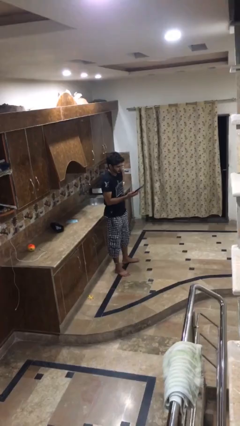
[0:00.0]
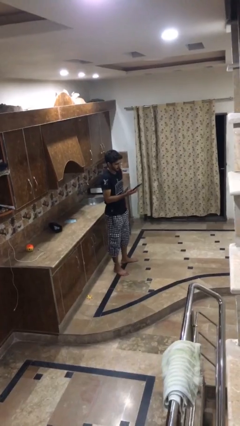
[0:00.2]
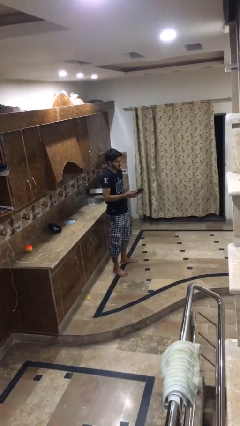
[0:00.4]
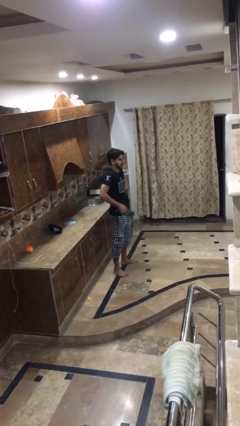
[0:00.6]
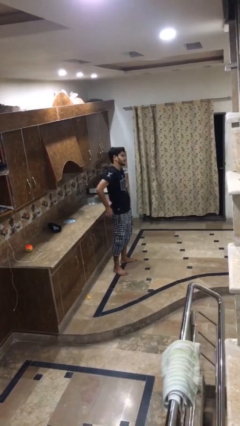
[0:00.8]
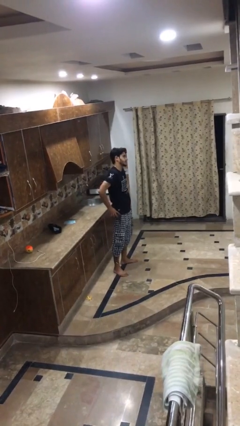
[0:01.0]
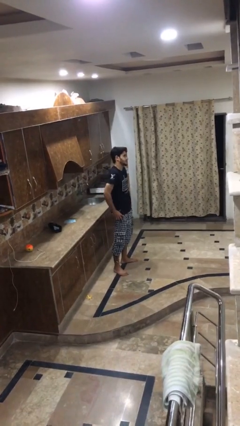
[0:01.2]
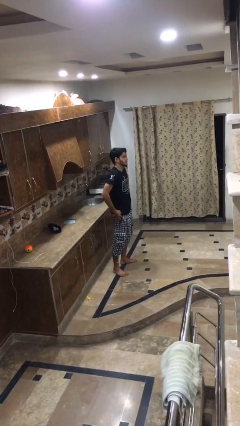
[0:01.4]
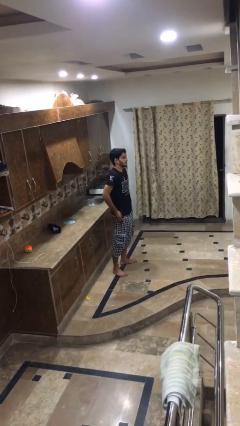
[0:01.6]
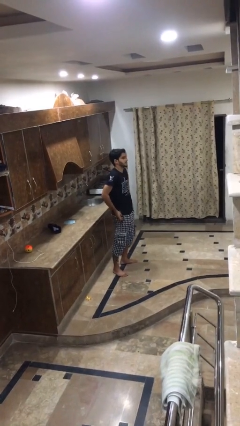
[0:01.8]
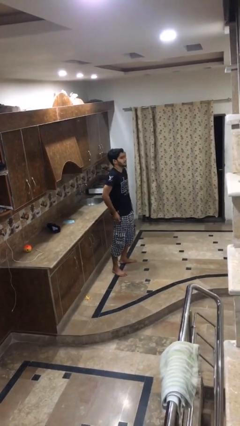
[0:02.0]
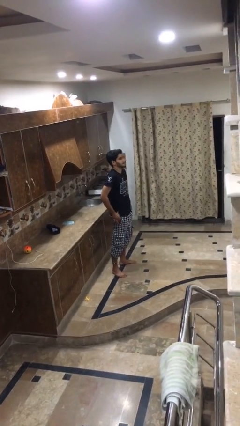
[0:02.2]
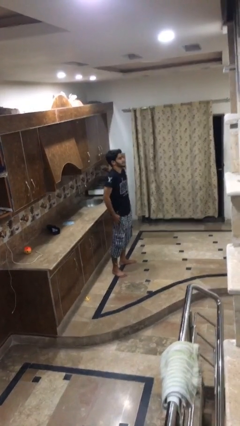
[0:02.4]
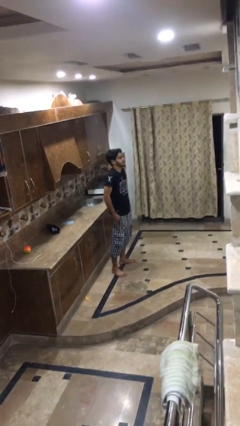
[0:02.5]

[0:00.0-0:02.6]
person puts phone into pocket

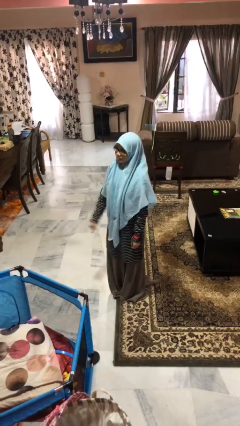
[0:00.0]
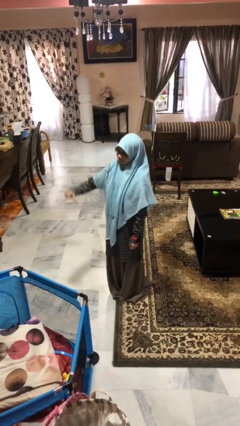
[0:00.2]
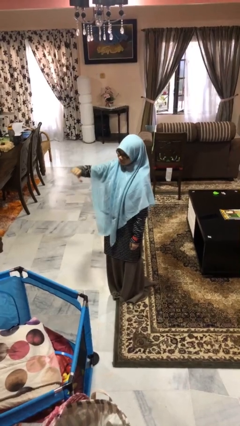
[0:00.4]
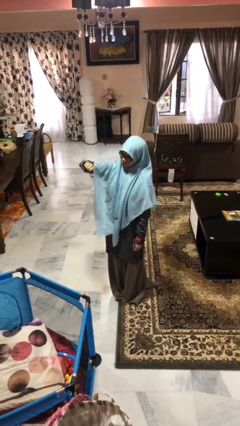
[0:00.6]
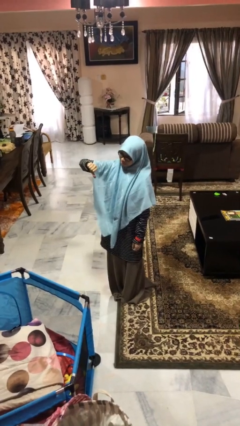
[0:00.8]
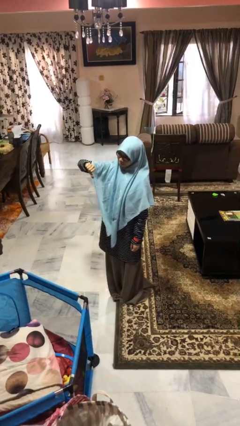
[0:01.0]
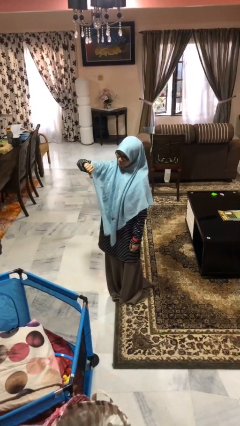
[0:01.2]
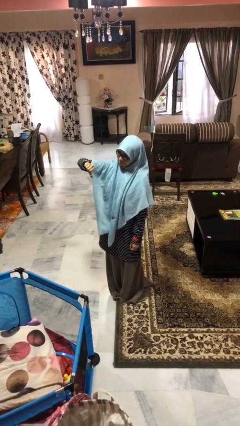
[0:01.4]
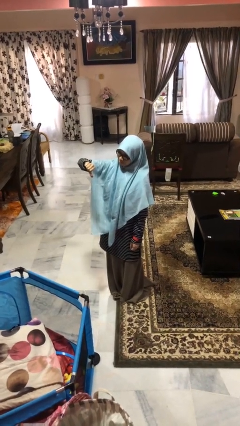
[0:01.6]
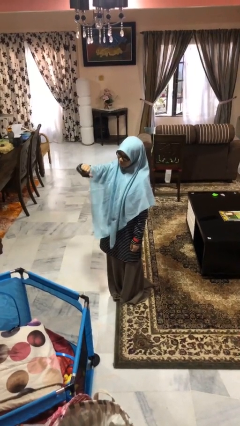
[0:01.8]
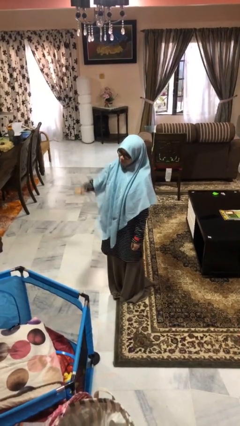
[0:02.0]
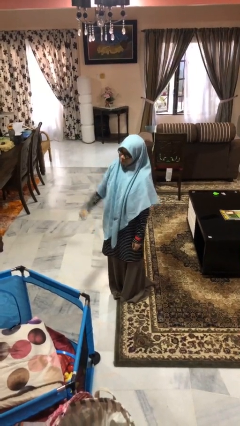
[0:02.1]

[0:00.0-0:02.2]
person gestures thumbs down

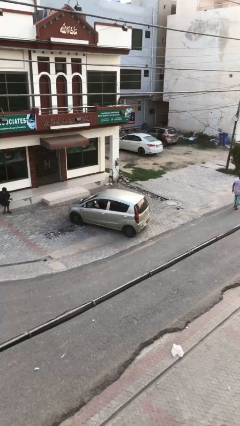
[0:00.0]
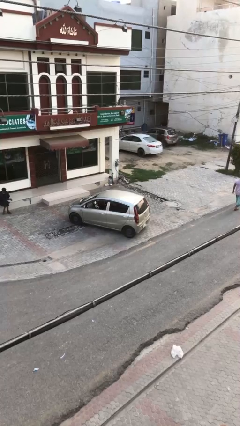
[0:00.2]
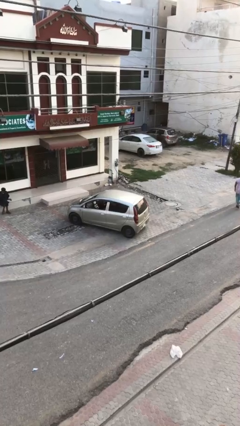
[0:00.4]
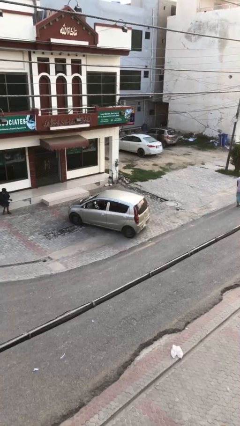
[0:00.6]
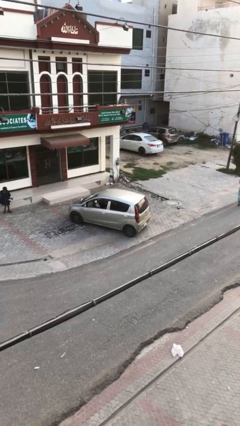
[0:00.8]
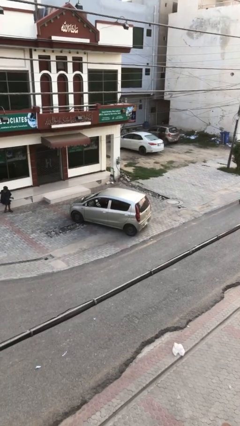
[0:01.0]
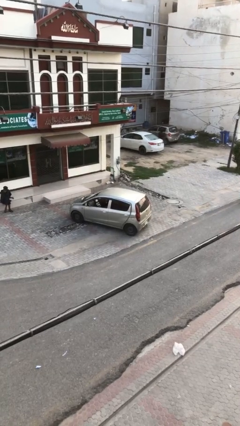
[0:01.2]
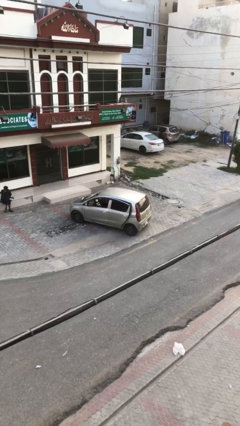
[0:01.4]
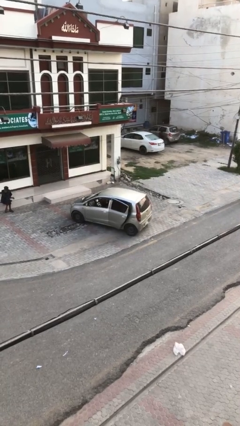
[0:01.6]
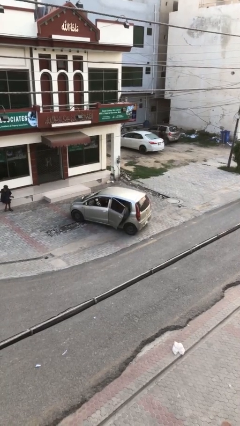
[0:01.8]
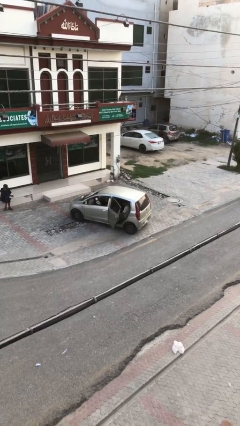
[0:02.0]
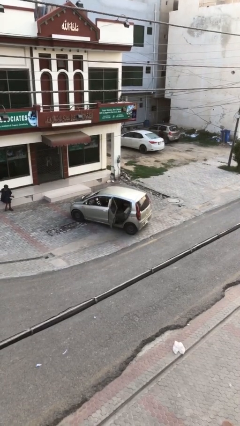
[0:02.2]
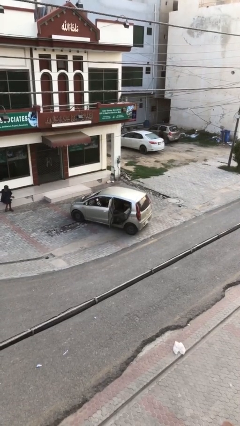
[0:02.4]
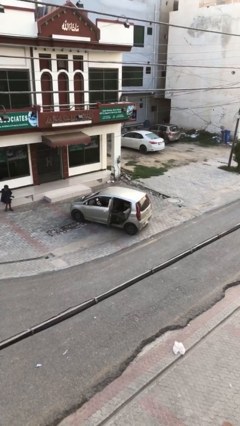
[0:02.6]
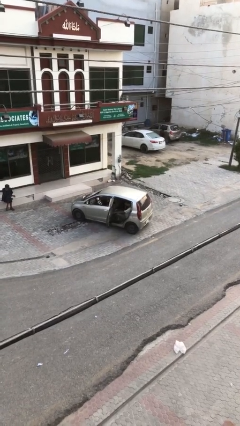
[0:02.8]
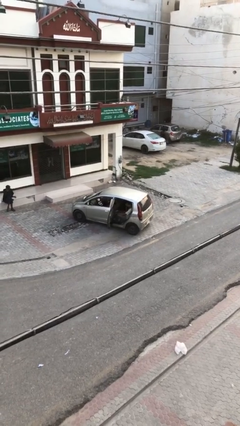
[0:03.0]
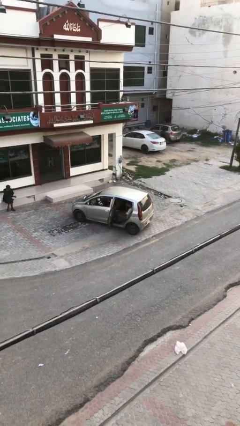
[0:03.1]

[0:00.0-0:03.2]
person opens car door

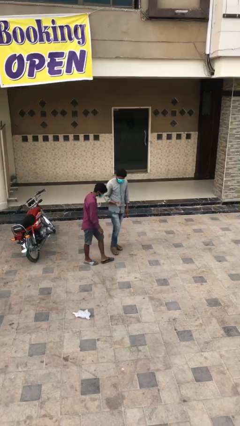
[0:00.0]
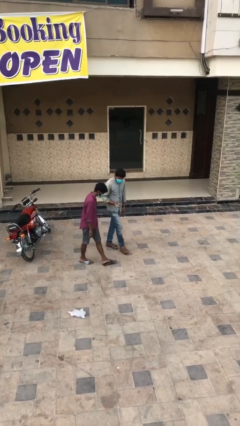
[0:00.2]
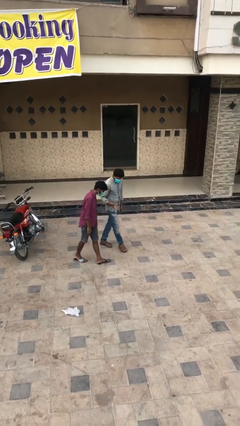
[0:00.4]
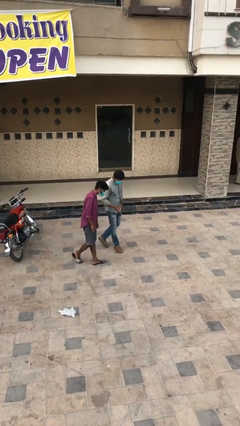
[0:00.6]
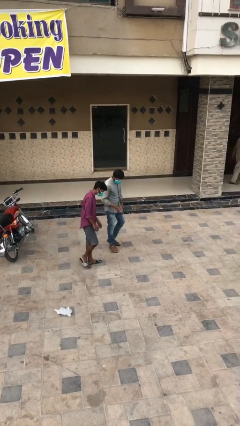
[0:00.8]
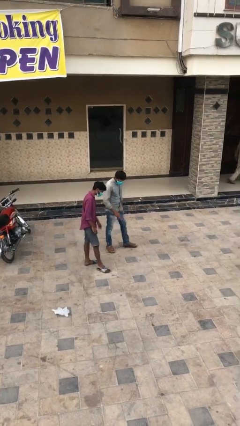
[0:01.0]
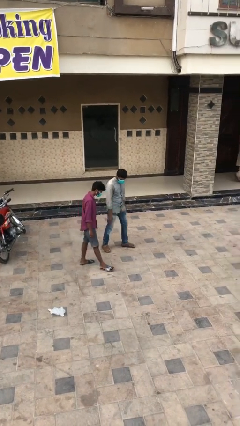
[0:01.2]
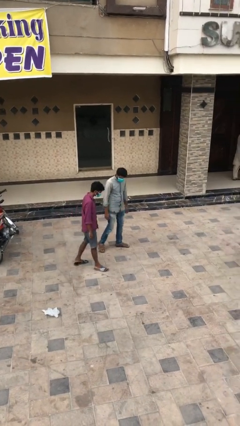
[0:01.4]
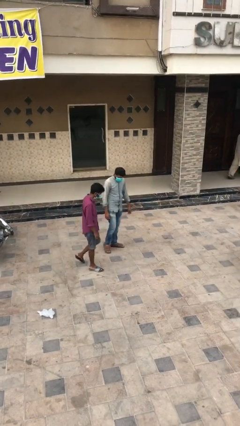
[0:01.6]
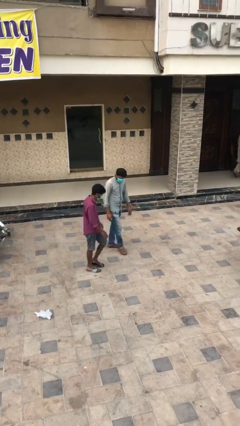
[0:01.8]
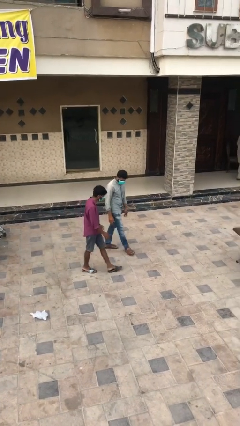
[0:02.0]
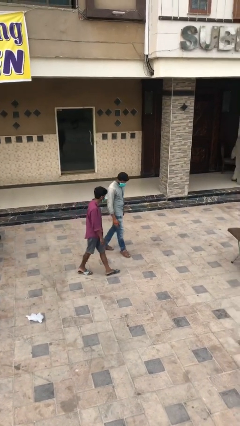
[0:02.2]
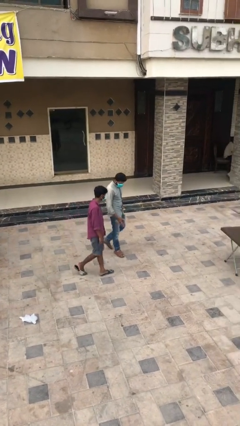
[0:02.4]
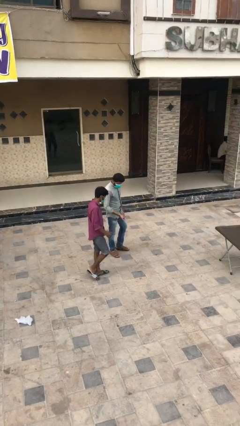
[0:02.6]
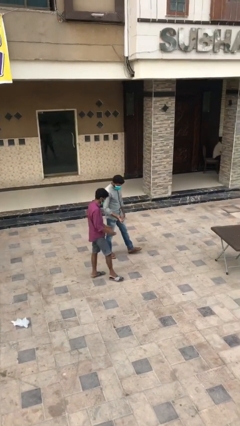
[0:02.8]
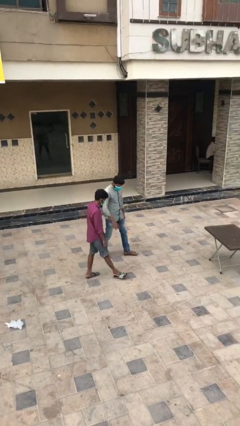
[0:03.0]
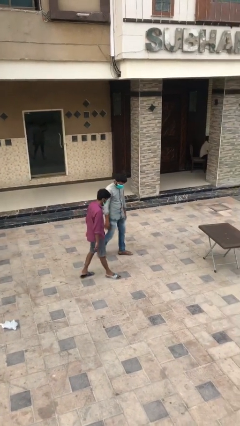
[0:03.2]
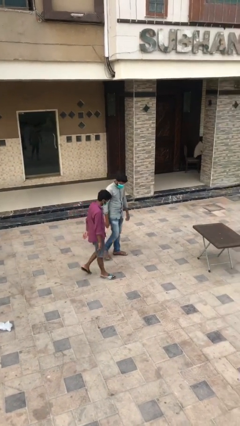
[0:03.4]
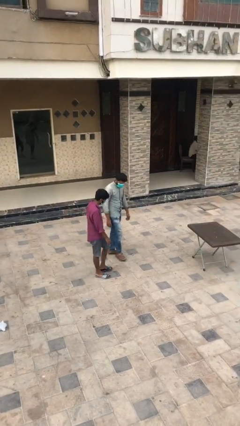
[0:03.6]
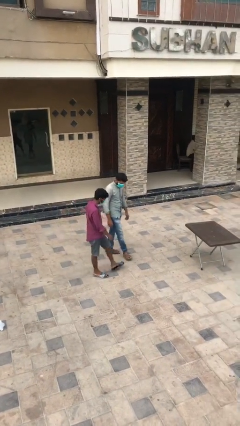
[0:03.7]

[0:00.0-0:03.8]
person talks to person

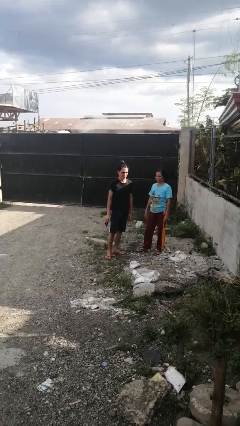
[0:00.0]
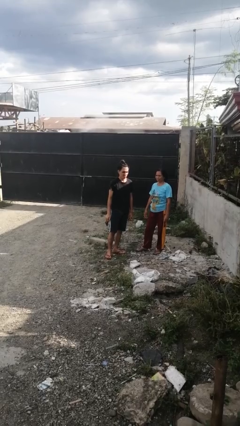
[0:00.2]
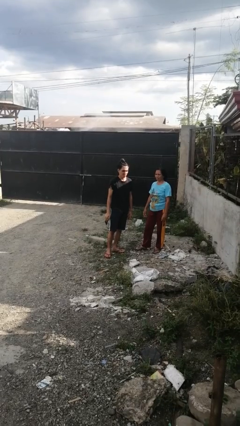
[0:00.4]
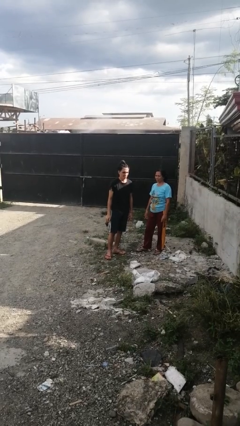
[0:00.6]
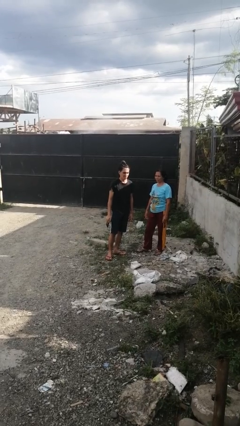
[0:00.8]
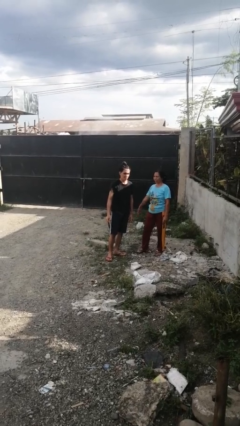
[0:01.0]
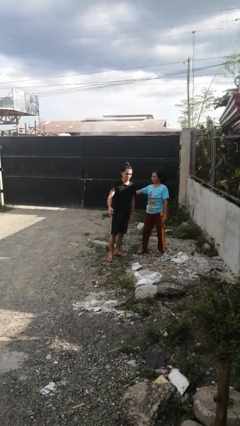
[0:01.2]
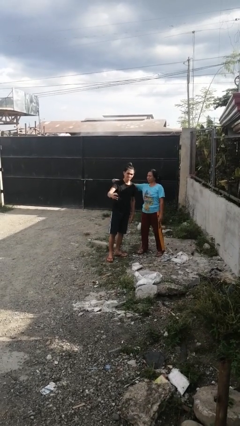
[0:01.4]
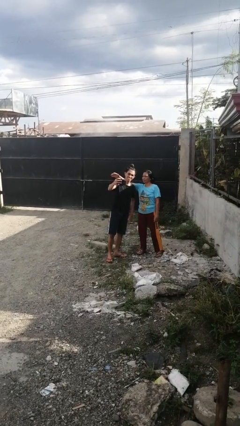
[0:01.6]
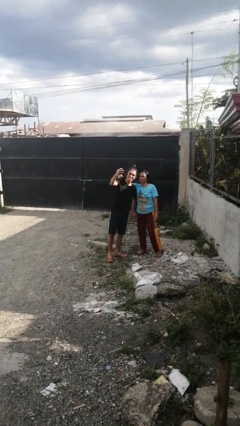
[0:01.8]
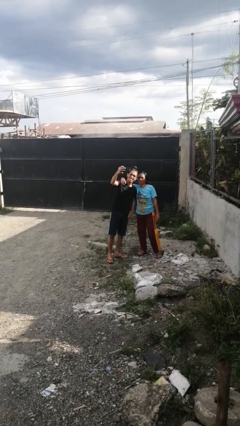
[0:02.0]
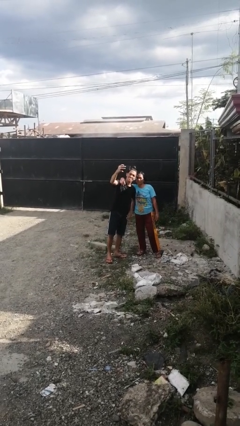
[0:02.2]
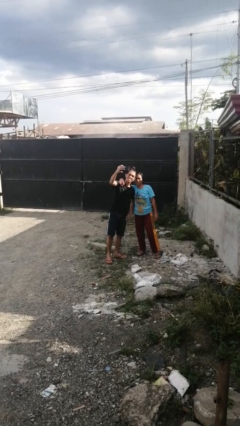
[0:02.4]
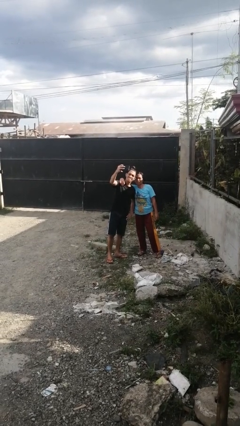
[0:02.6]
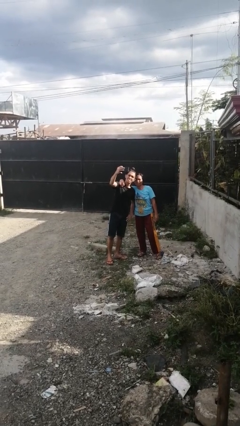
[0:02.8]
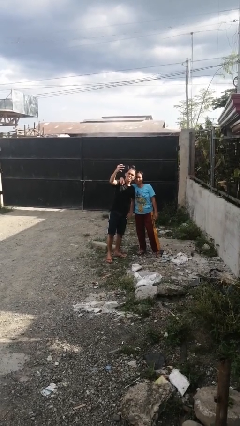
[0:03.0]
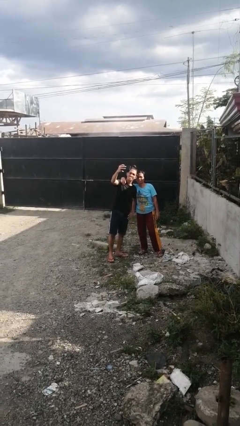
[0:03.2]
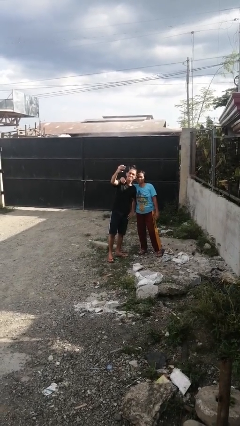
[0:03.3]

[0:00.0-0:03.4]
person takes selfie with person

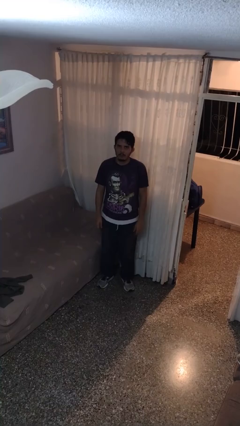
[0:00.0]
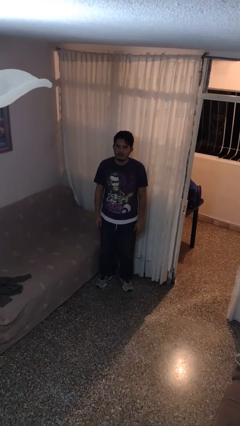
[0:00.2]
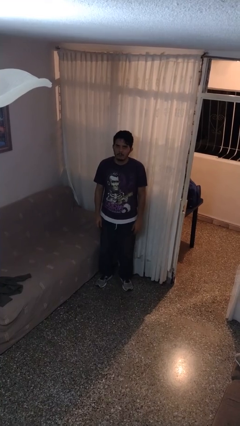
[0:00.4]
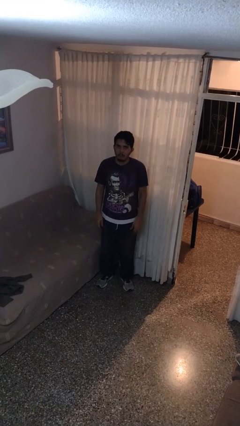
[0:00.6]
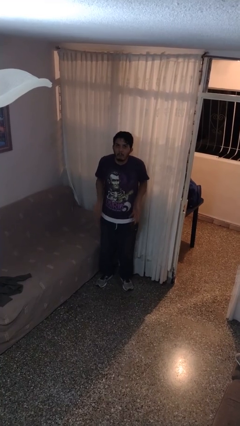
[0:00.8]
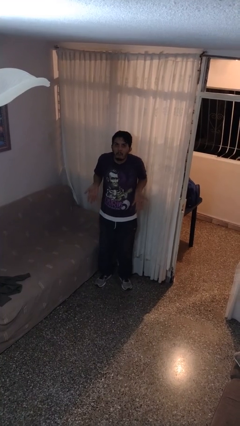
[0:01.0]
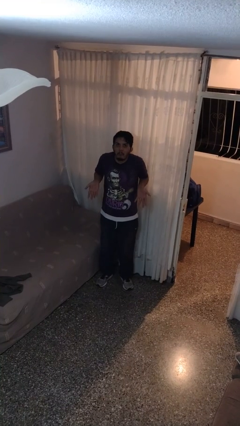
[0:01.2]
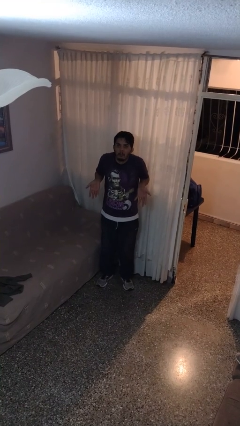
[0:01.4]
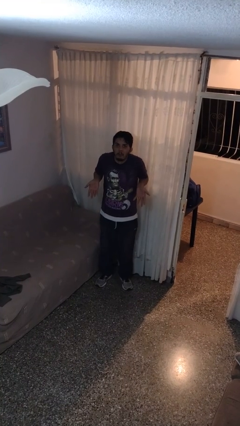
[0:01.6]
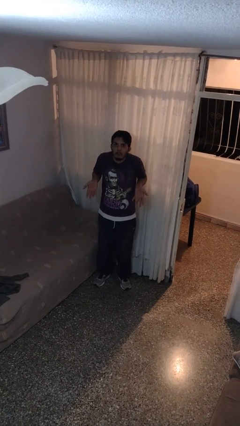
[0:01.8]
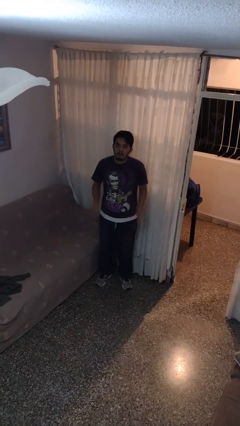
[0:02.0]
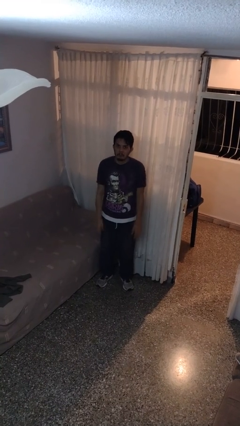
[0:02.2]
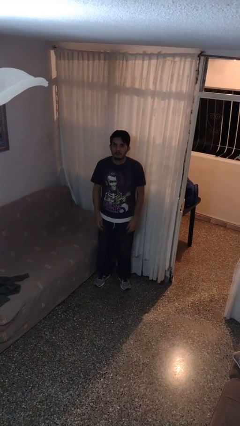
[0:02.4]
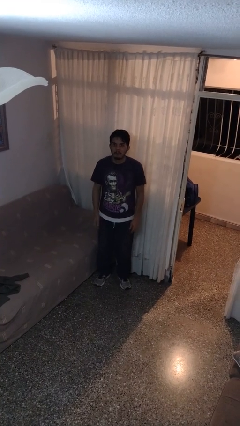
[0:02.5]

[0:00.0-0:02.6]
person shrugs
